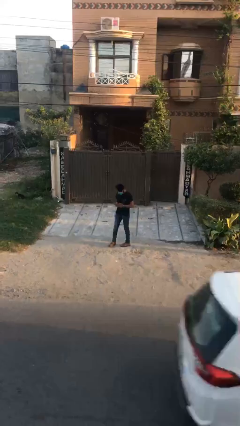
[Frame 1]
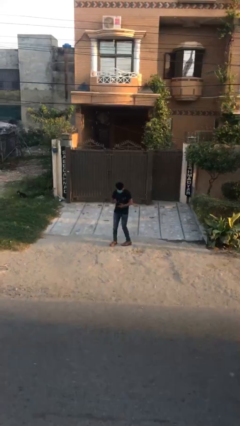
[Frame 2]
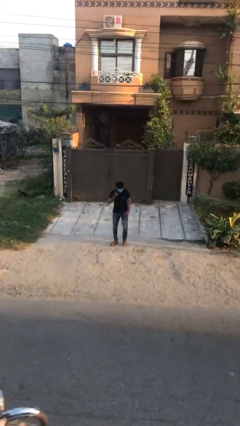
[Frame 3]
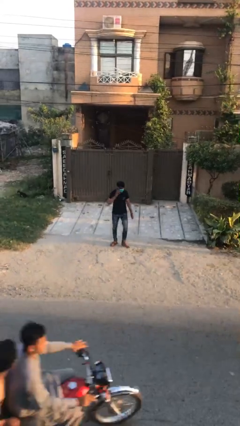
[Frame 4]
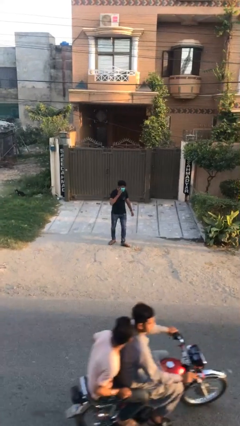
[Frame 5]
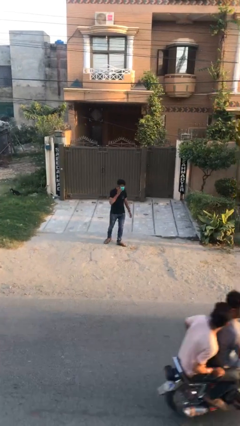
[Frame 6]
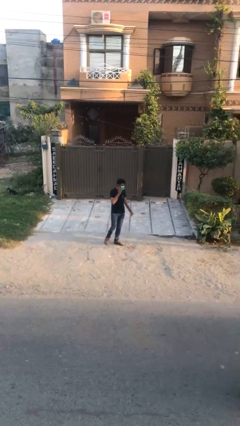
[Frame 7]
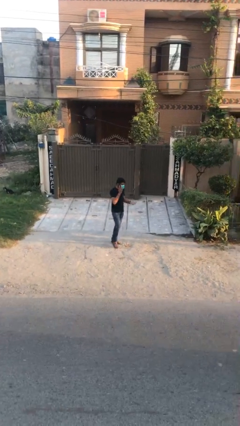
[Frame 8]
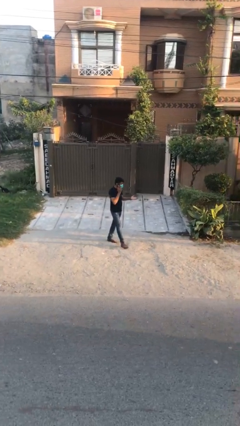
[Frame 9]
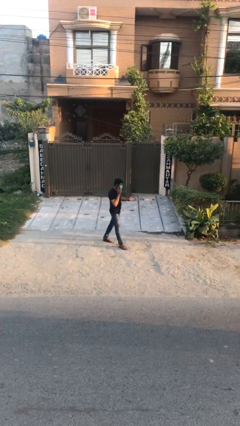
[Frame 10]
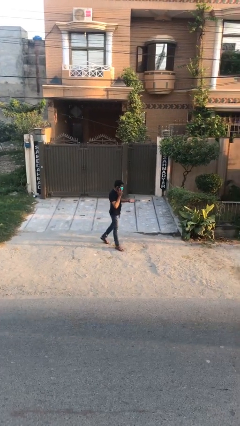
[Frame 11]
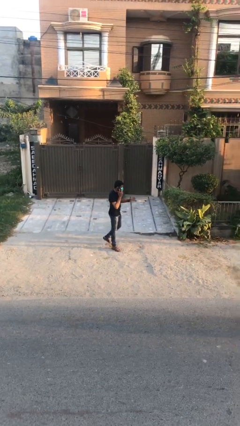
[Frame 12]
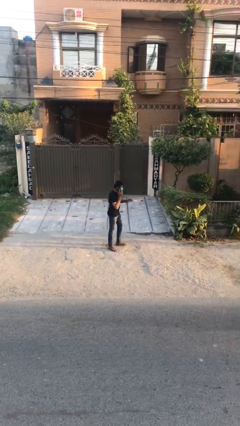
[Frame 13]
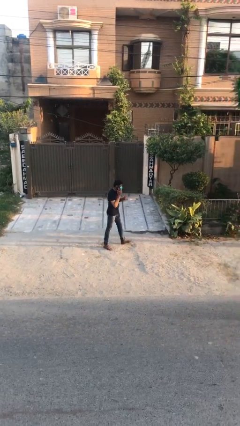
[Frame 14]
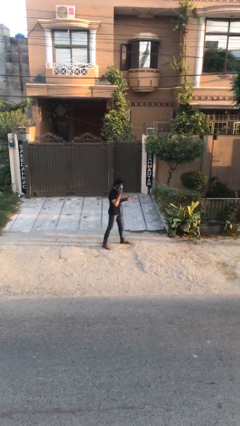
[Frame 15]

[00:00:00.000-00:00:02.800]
person talks on phone

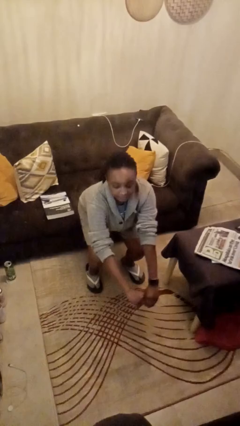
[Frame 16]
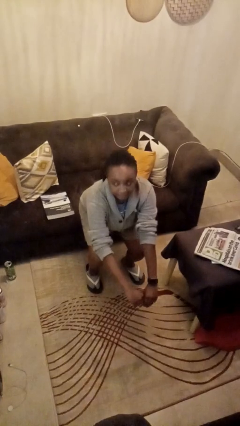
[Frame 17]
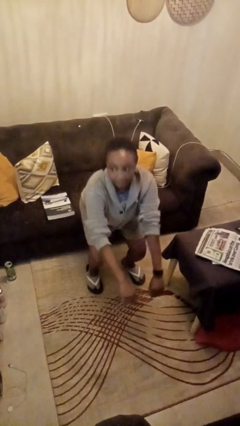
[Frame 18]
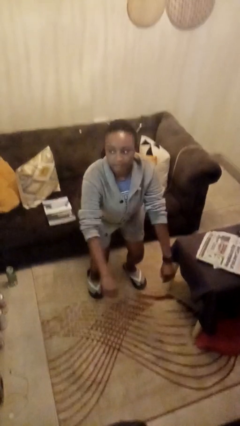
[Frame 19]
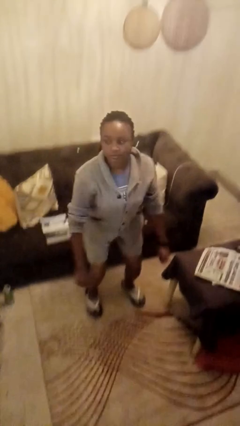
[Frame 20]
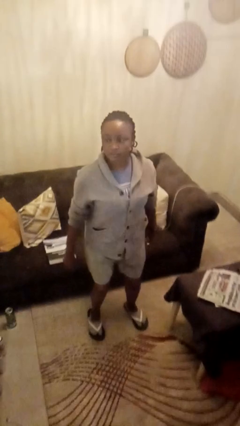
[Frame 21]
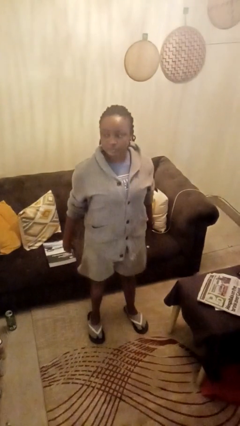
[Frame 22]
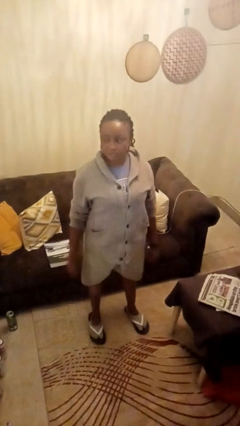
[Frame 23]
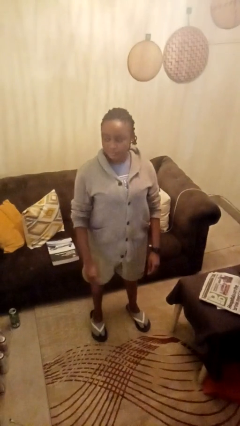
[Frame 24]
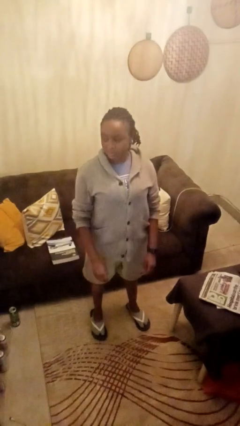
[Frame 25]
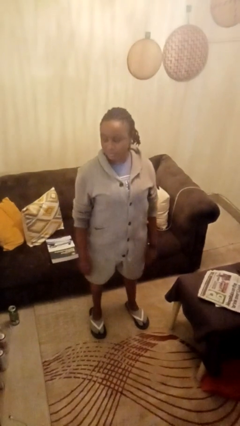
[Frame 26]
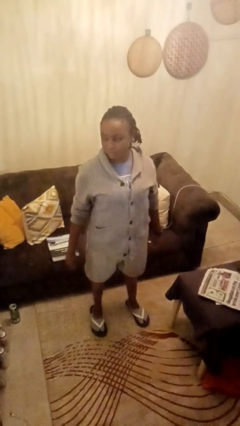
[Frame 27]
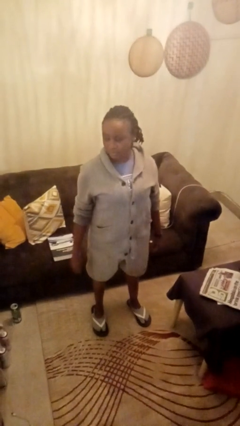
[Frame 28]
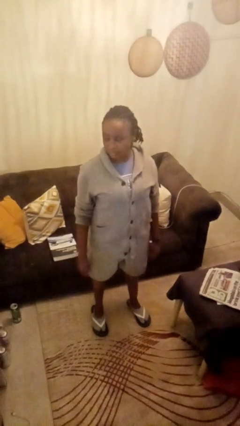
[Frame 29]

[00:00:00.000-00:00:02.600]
person stands up

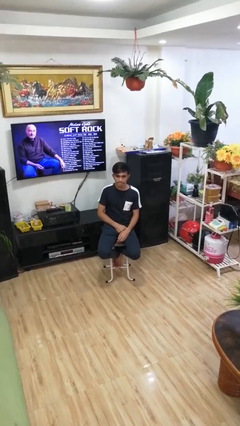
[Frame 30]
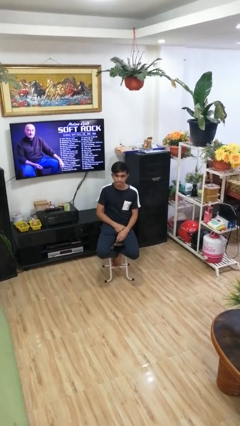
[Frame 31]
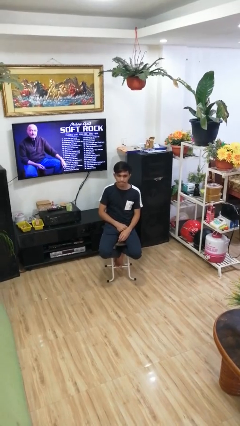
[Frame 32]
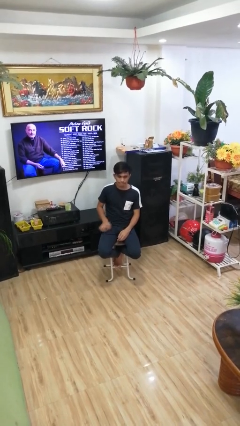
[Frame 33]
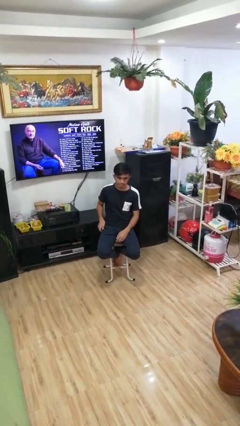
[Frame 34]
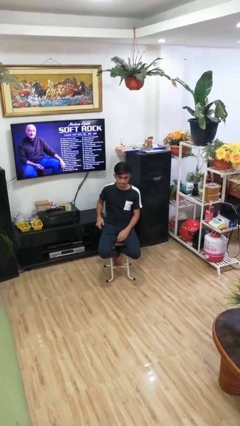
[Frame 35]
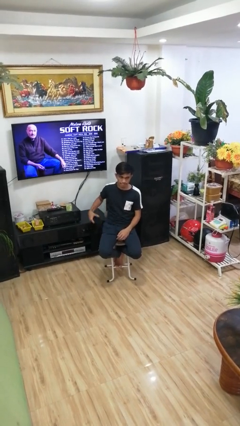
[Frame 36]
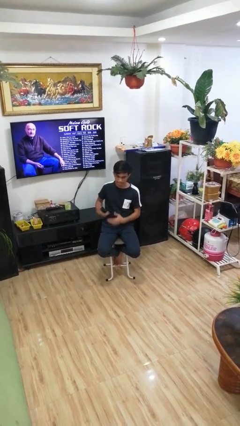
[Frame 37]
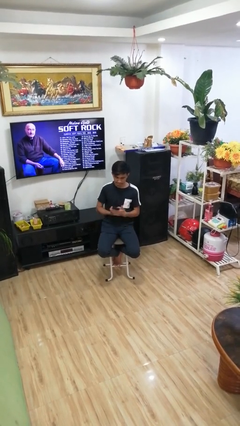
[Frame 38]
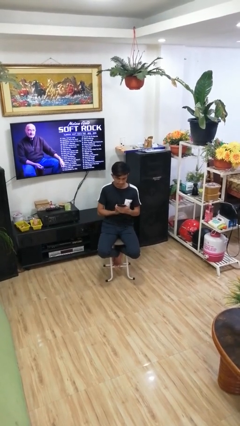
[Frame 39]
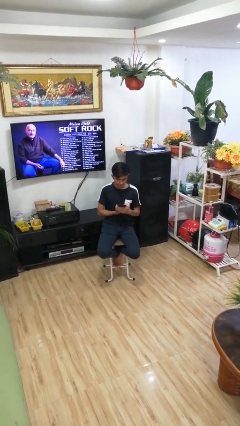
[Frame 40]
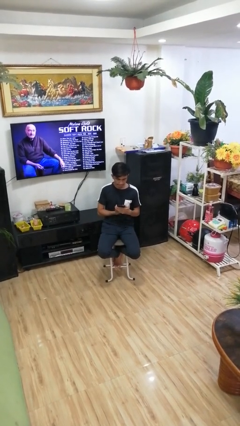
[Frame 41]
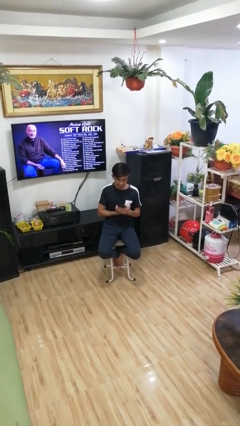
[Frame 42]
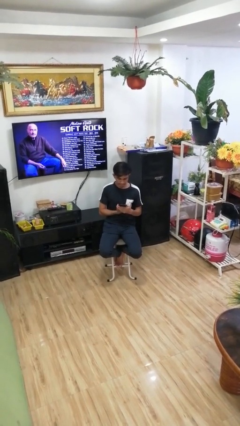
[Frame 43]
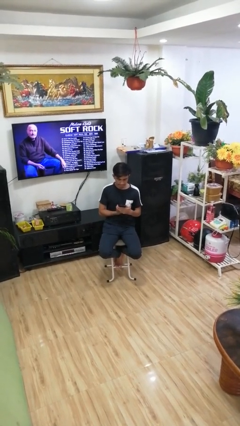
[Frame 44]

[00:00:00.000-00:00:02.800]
person takes phone from pocket

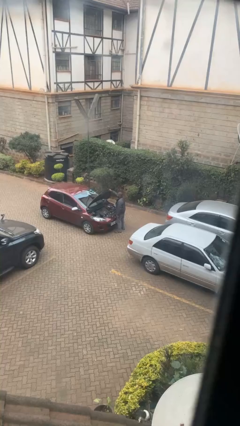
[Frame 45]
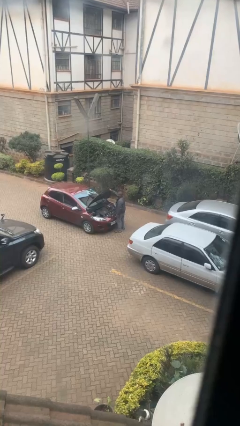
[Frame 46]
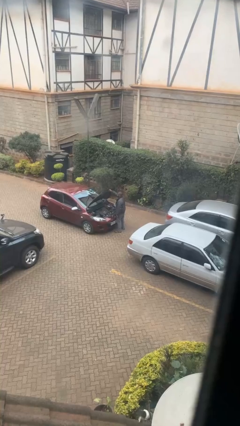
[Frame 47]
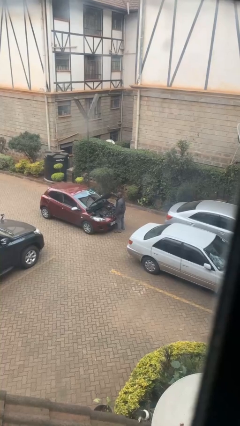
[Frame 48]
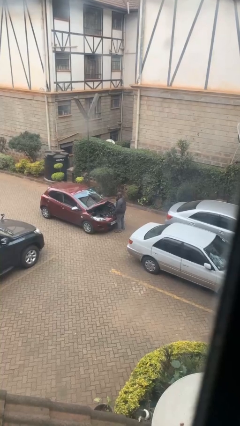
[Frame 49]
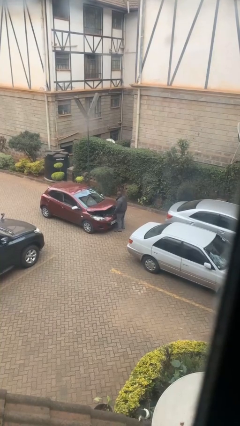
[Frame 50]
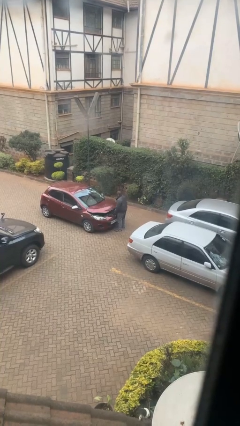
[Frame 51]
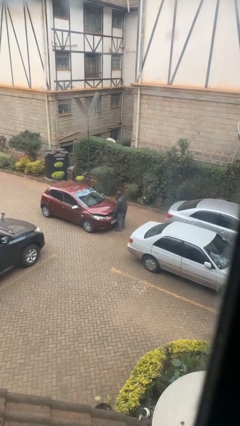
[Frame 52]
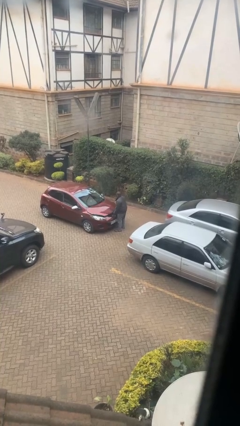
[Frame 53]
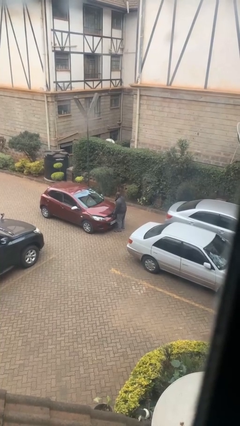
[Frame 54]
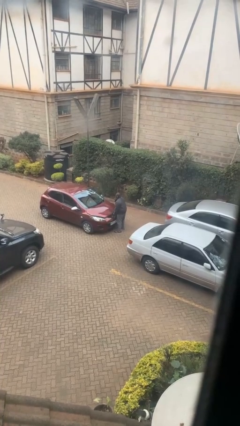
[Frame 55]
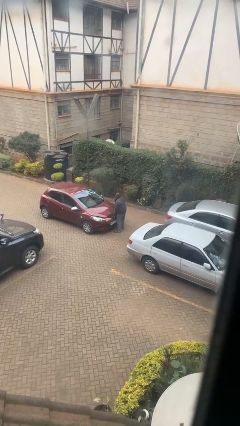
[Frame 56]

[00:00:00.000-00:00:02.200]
person closes car hood

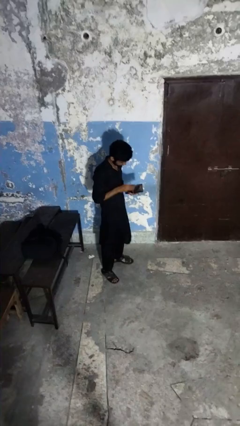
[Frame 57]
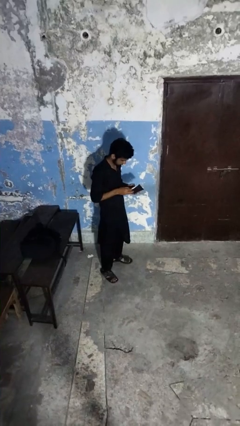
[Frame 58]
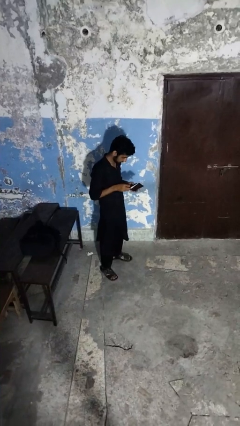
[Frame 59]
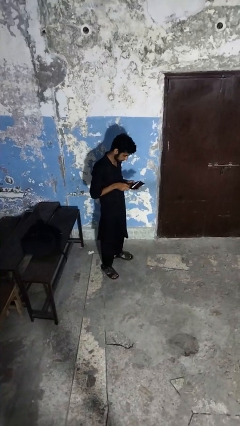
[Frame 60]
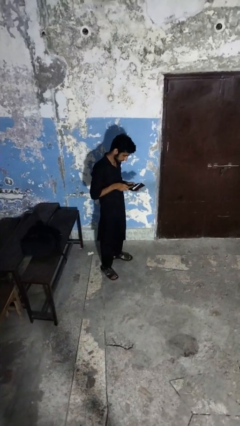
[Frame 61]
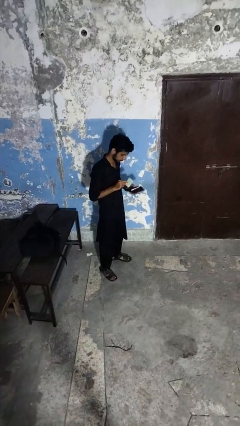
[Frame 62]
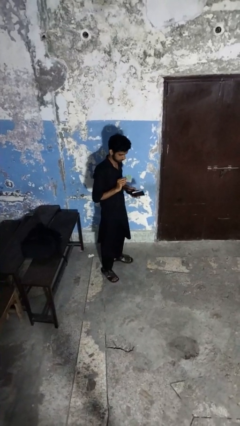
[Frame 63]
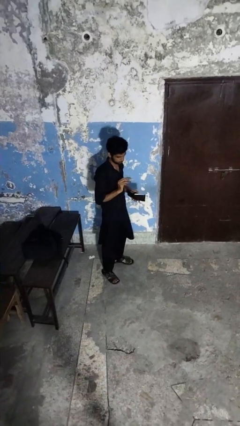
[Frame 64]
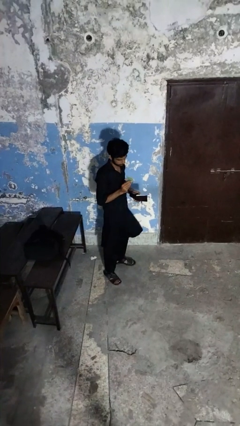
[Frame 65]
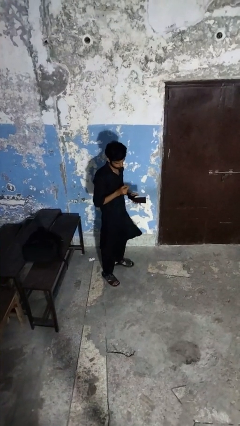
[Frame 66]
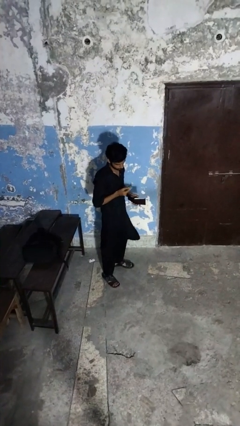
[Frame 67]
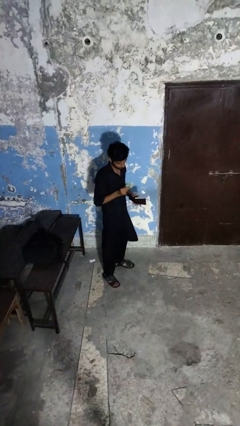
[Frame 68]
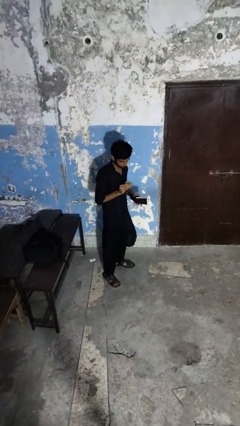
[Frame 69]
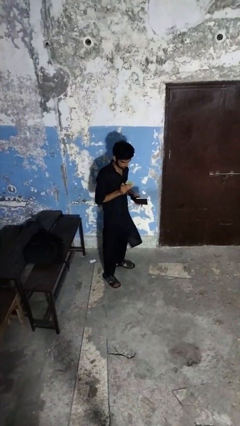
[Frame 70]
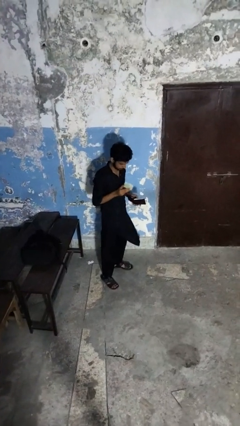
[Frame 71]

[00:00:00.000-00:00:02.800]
person takes object from purse

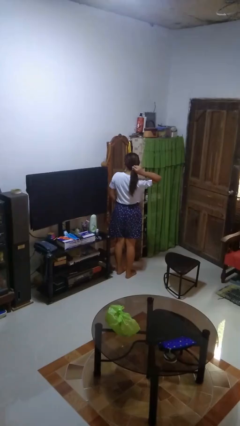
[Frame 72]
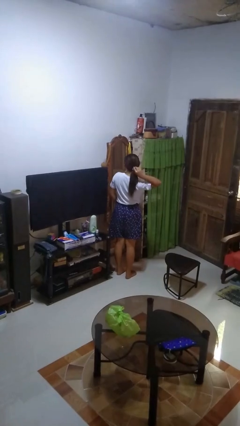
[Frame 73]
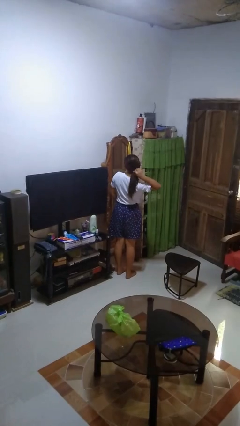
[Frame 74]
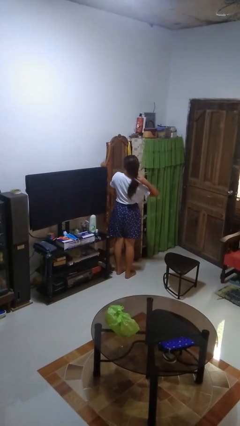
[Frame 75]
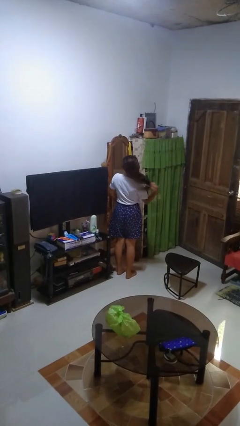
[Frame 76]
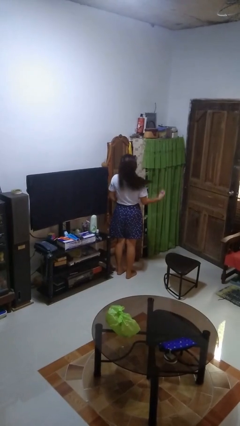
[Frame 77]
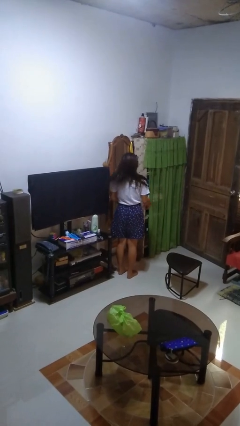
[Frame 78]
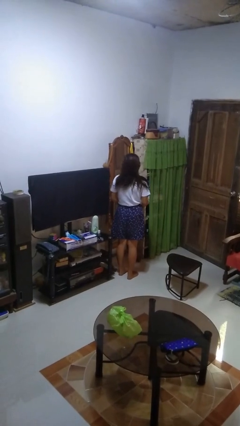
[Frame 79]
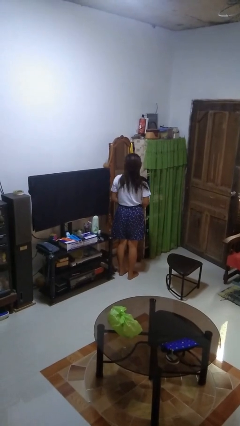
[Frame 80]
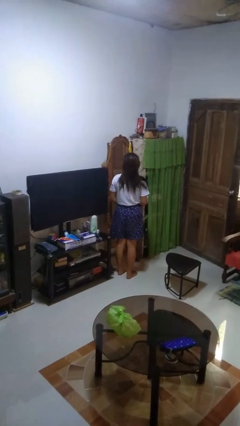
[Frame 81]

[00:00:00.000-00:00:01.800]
person takes off hairtie

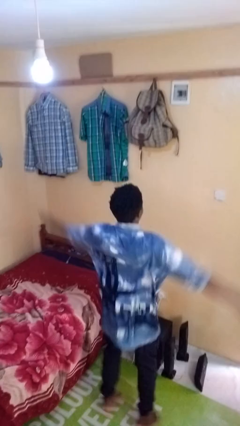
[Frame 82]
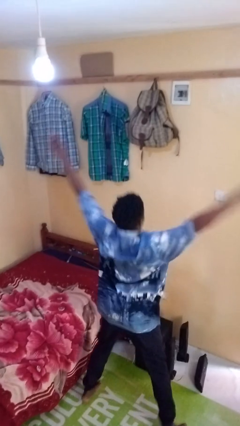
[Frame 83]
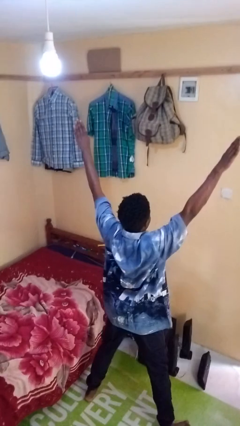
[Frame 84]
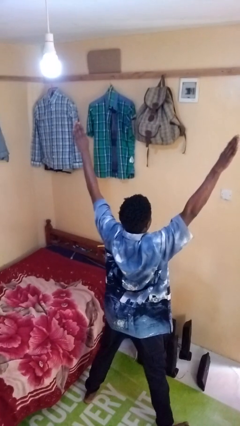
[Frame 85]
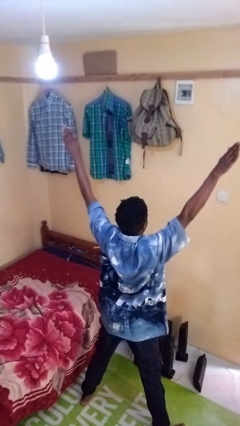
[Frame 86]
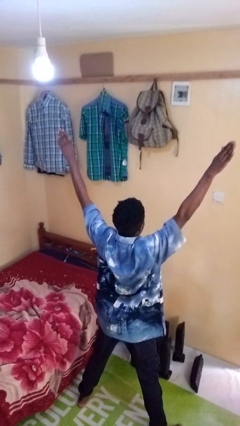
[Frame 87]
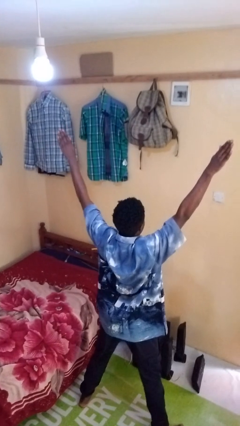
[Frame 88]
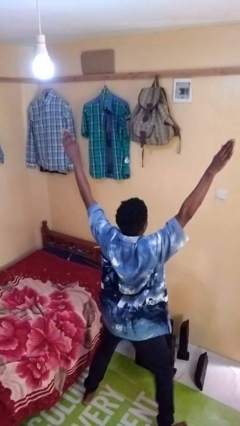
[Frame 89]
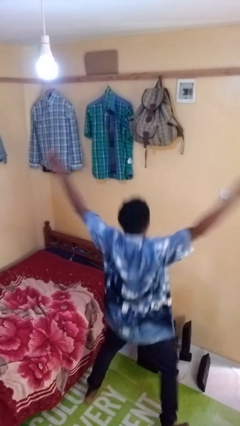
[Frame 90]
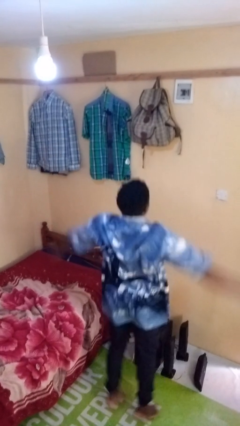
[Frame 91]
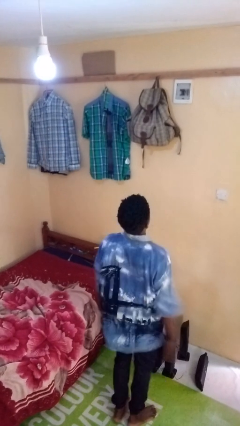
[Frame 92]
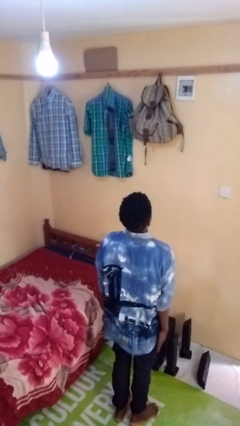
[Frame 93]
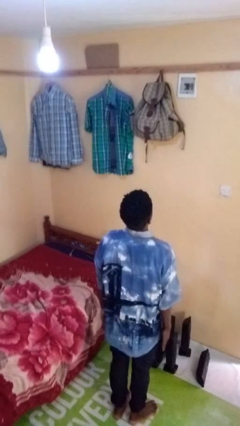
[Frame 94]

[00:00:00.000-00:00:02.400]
person exercises with jumping jacks
